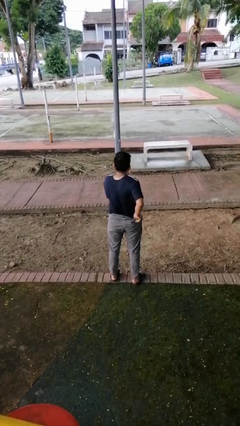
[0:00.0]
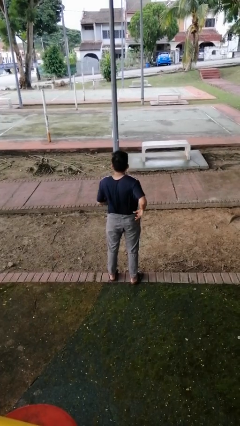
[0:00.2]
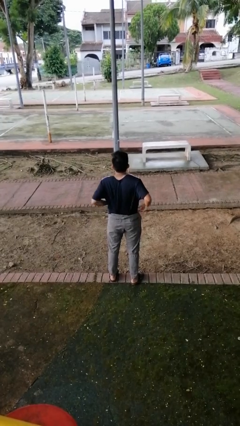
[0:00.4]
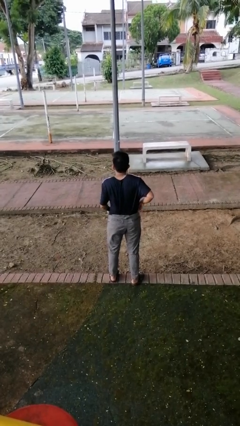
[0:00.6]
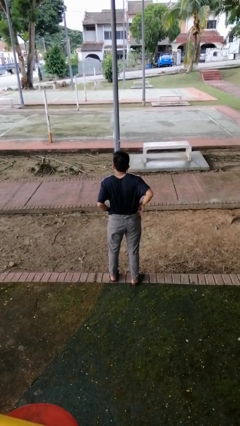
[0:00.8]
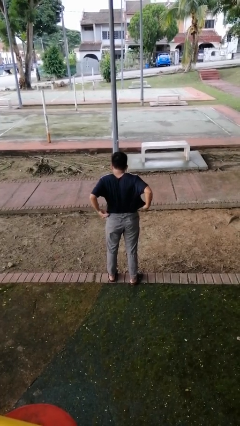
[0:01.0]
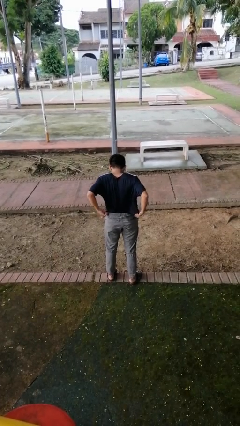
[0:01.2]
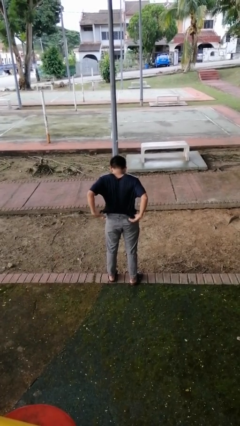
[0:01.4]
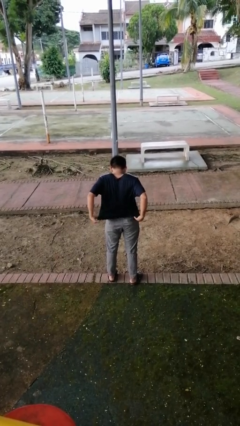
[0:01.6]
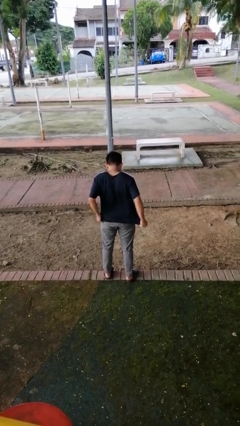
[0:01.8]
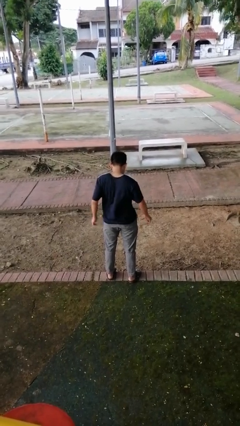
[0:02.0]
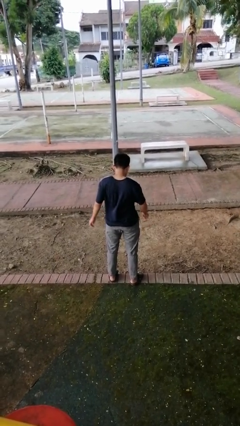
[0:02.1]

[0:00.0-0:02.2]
person untucks shirt

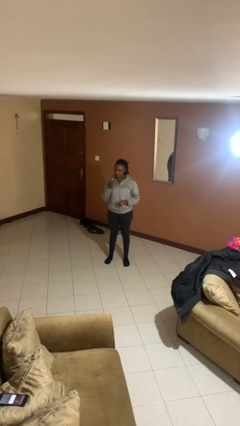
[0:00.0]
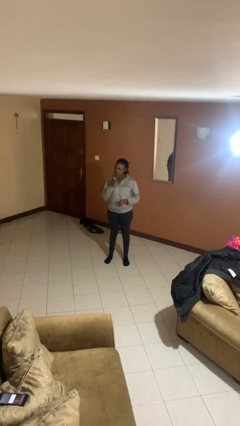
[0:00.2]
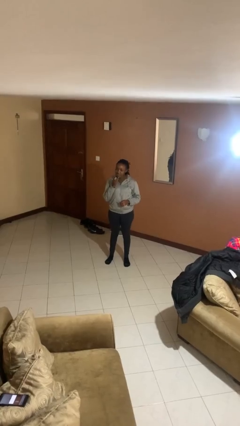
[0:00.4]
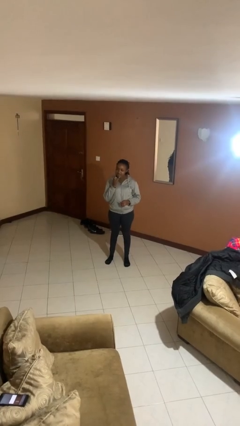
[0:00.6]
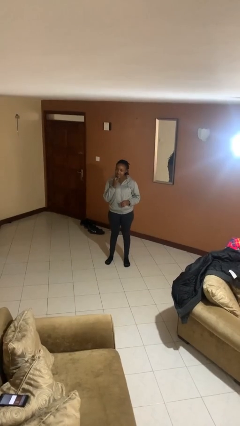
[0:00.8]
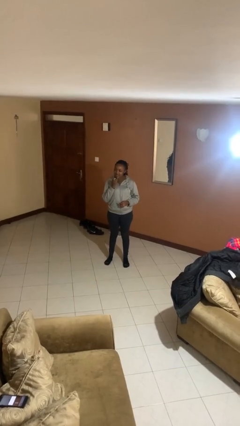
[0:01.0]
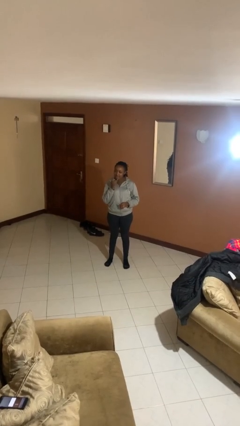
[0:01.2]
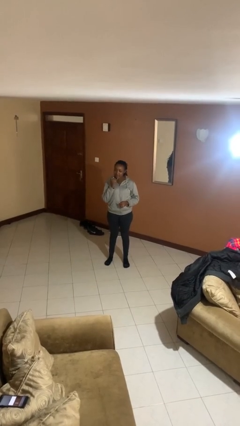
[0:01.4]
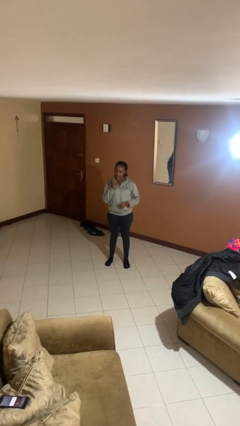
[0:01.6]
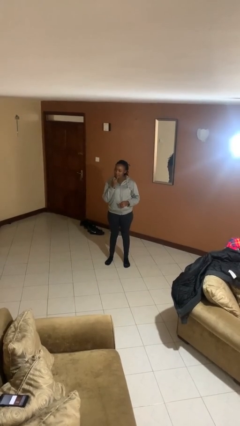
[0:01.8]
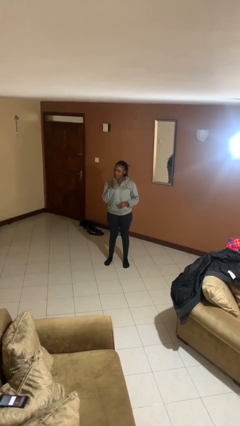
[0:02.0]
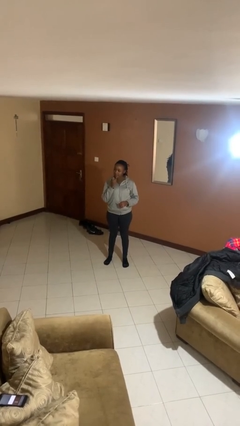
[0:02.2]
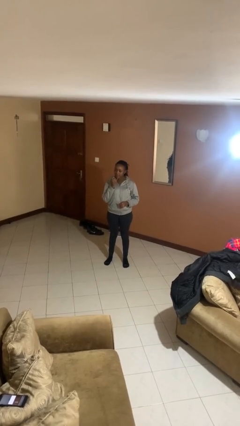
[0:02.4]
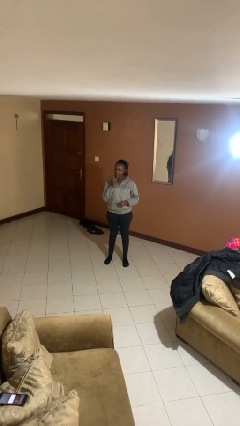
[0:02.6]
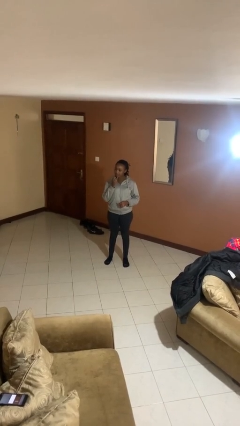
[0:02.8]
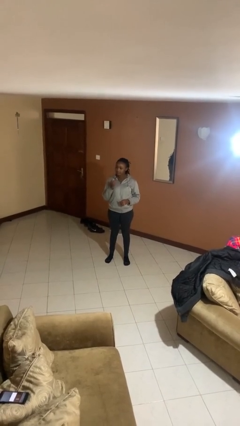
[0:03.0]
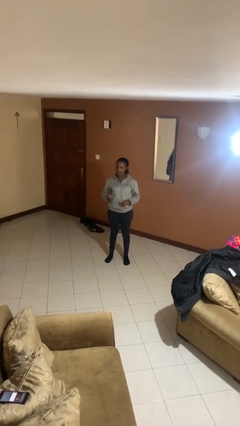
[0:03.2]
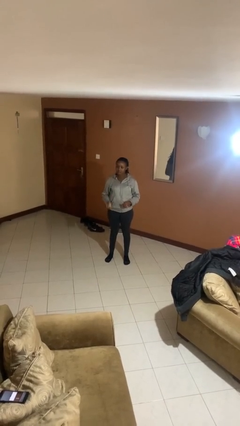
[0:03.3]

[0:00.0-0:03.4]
person applies lip makeup

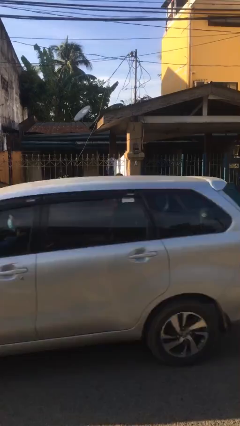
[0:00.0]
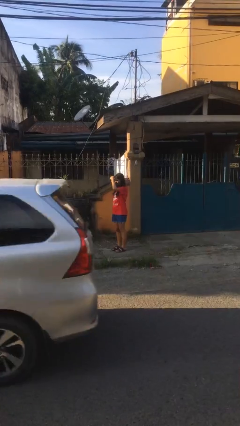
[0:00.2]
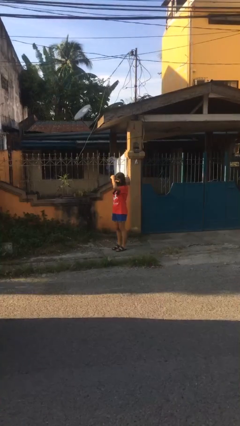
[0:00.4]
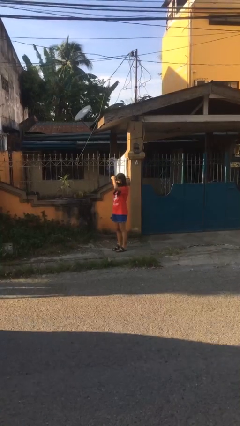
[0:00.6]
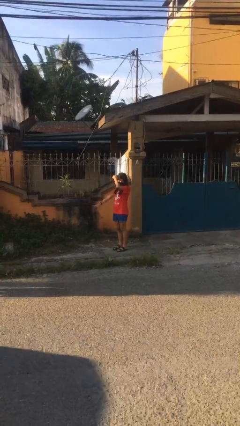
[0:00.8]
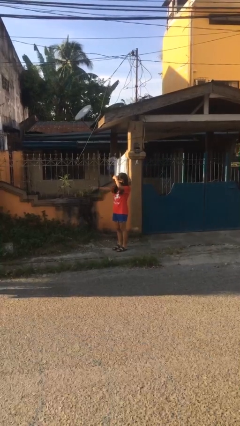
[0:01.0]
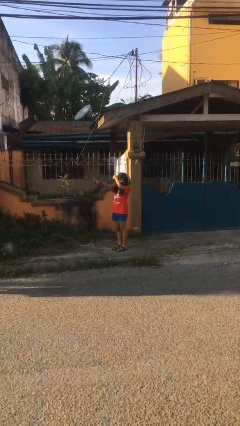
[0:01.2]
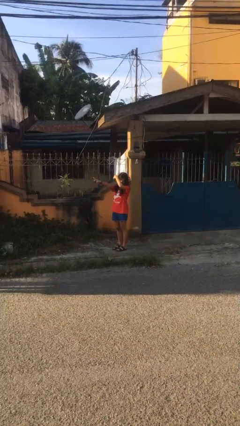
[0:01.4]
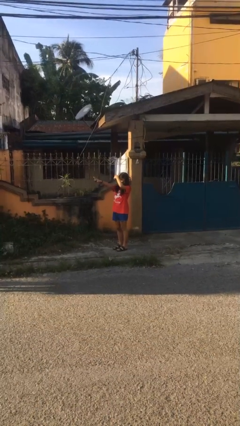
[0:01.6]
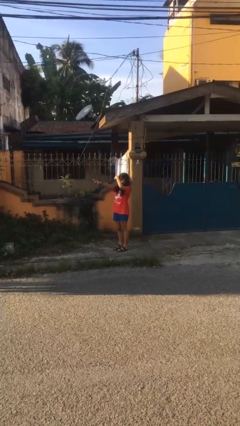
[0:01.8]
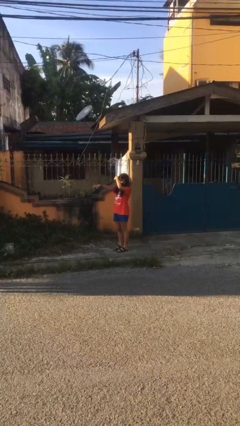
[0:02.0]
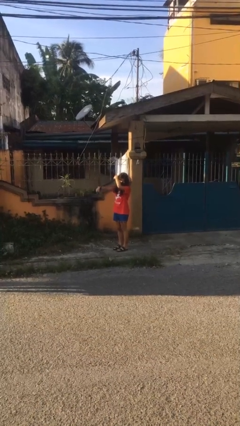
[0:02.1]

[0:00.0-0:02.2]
person points at person

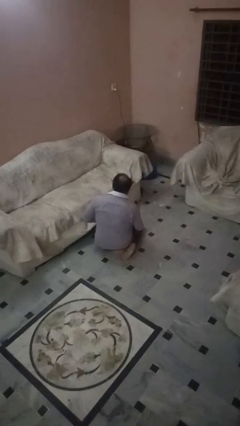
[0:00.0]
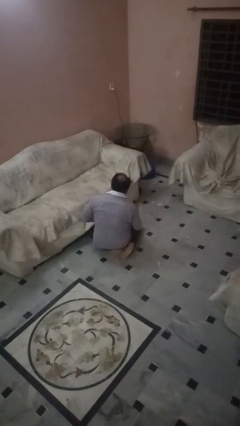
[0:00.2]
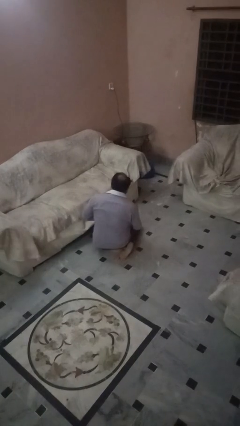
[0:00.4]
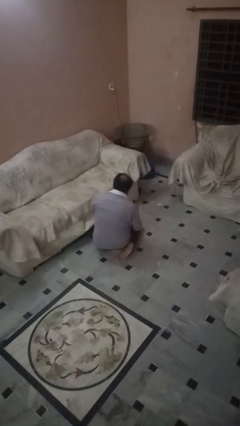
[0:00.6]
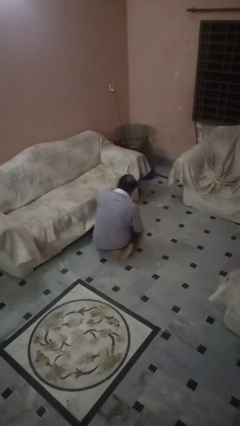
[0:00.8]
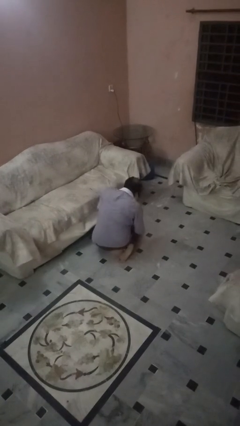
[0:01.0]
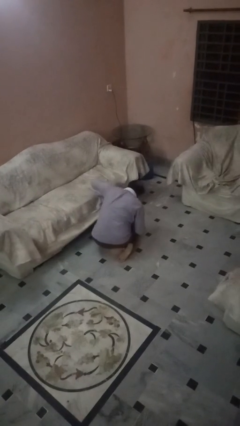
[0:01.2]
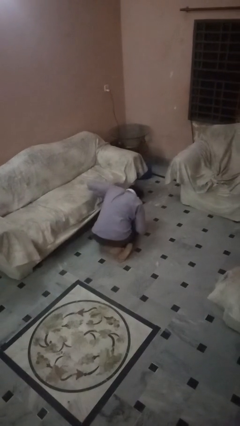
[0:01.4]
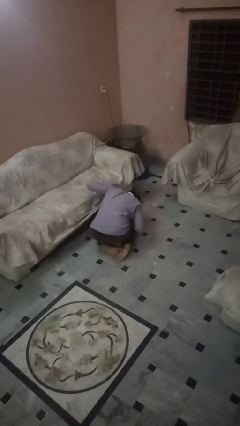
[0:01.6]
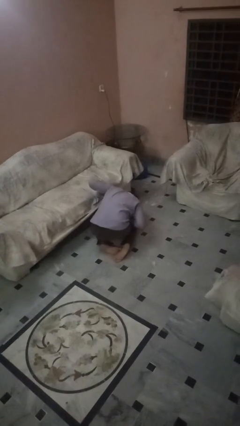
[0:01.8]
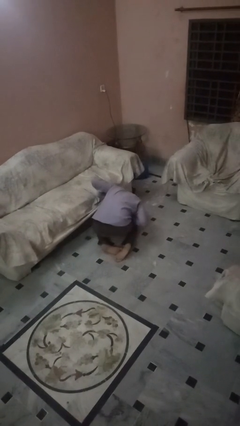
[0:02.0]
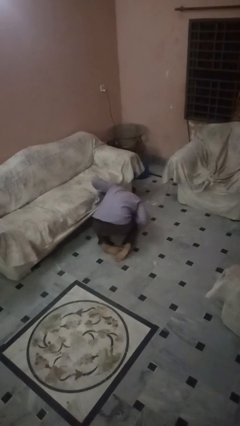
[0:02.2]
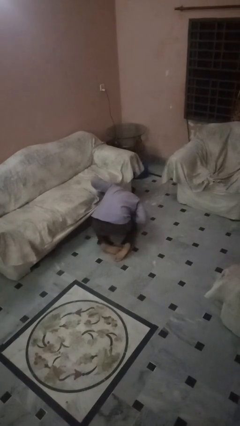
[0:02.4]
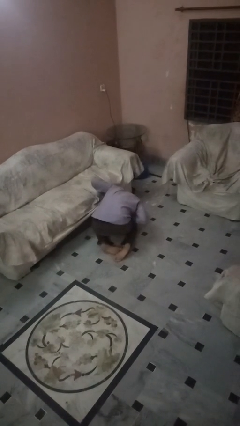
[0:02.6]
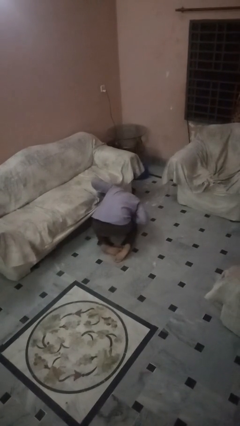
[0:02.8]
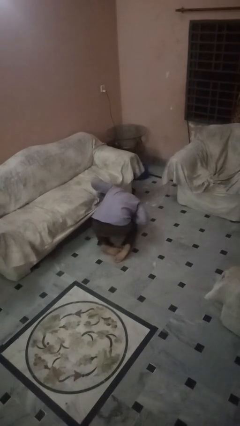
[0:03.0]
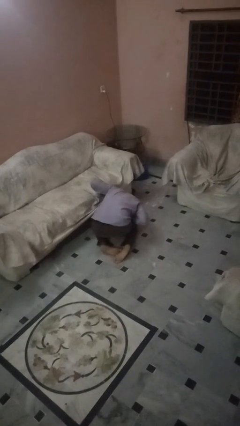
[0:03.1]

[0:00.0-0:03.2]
person searches under couch

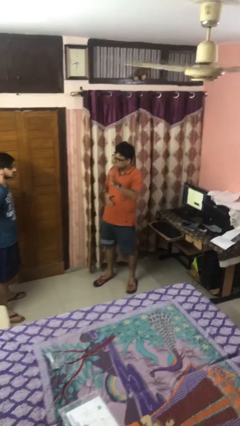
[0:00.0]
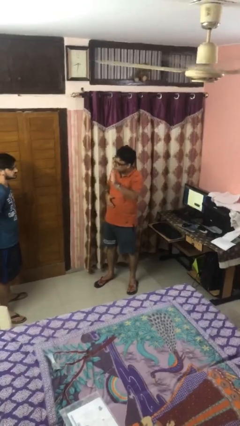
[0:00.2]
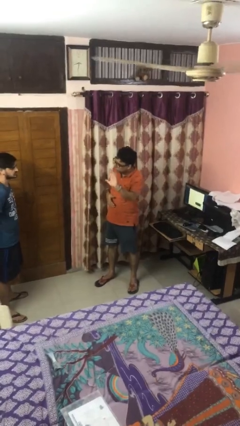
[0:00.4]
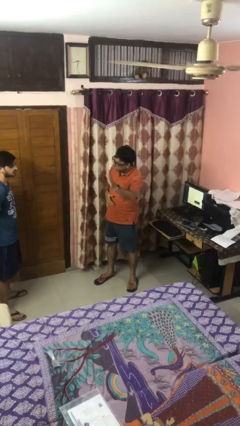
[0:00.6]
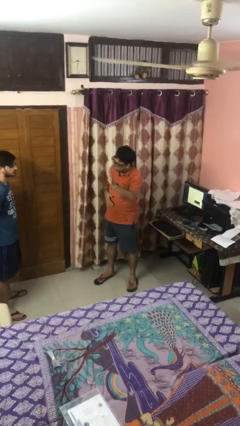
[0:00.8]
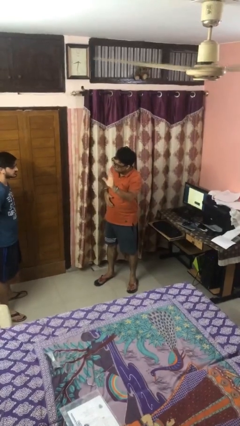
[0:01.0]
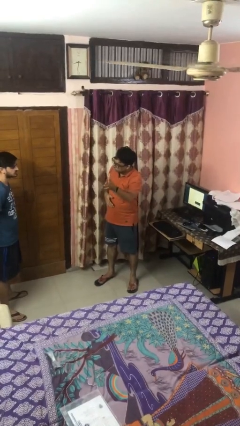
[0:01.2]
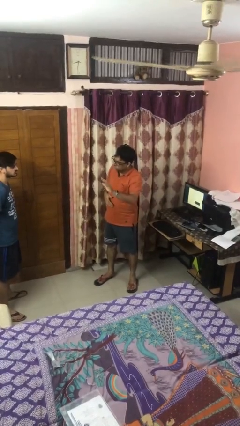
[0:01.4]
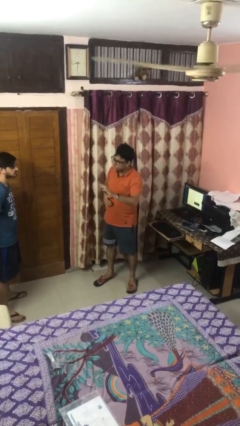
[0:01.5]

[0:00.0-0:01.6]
person waves at person

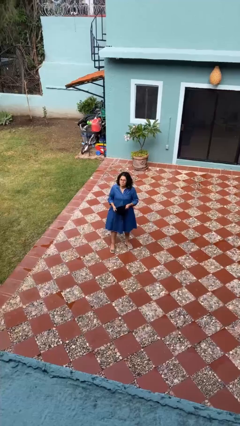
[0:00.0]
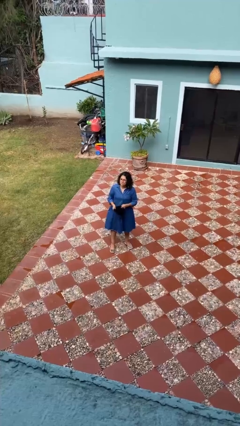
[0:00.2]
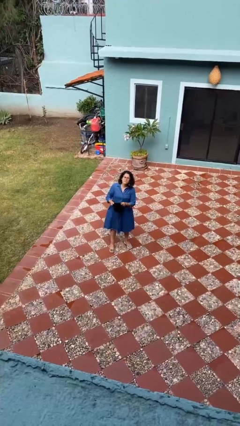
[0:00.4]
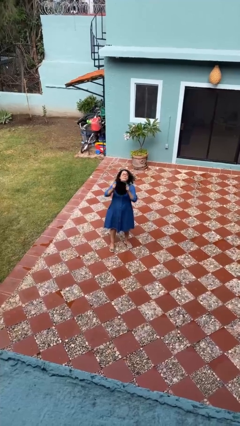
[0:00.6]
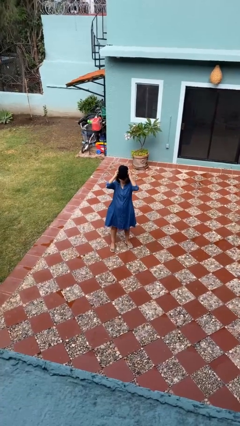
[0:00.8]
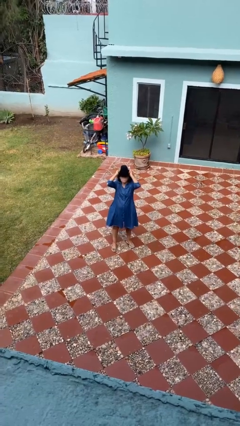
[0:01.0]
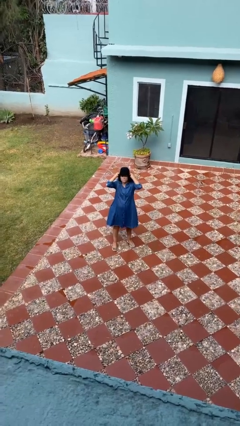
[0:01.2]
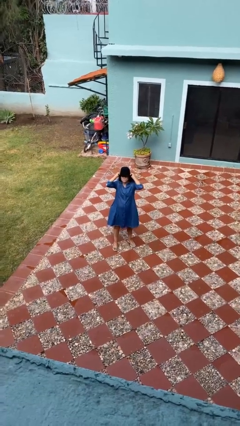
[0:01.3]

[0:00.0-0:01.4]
person puts on hat

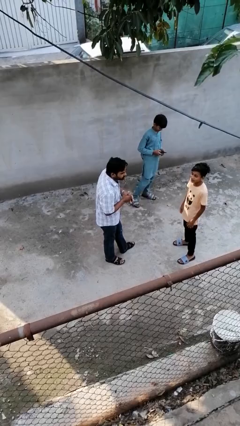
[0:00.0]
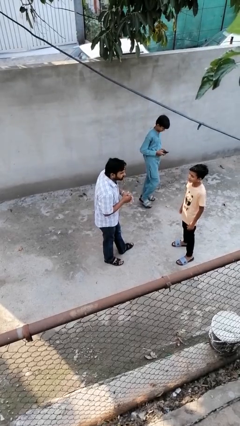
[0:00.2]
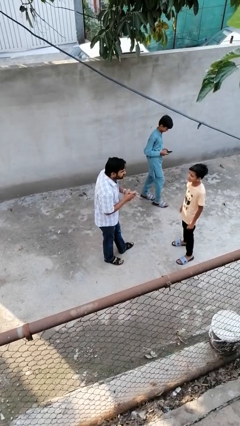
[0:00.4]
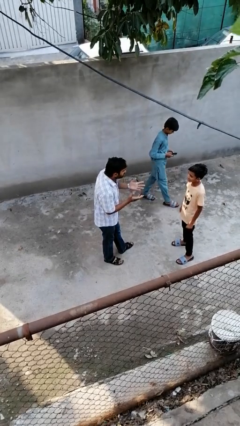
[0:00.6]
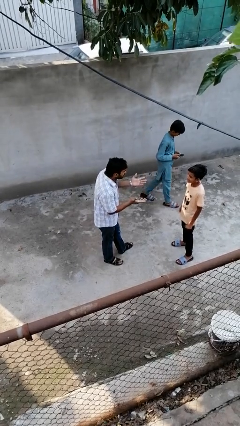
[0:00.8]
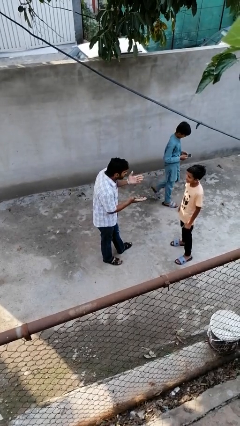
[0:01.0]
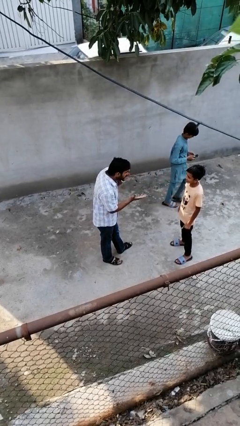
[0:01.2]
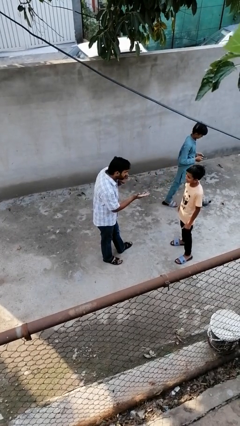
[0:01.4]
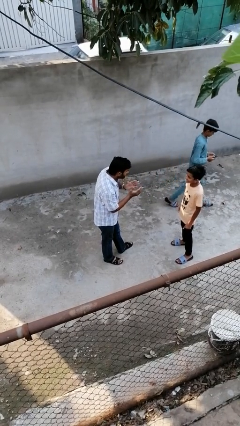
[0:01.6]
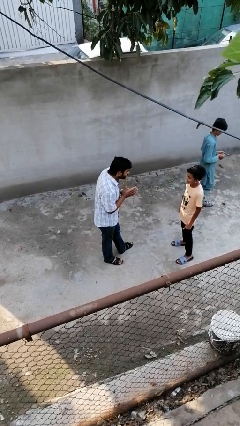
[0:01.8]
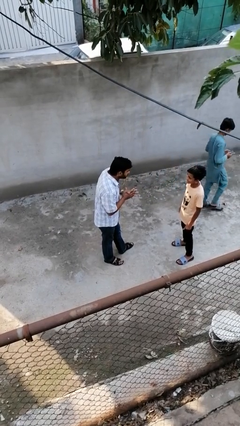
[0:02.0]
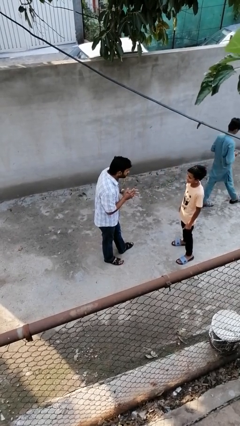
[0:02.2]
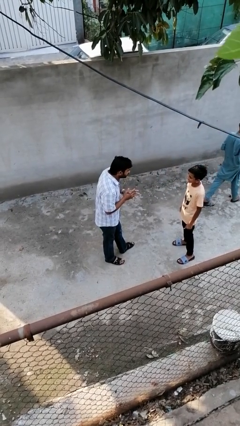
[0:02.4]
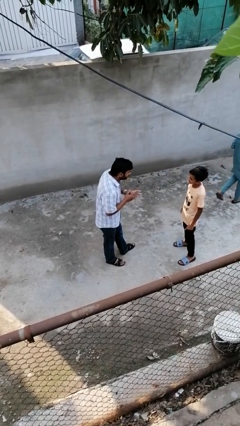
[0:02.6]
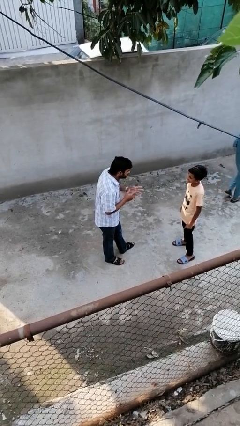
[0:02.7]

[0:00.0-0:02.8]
person talks to person
